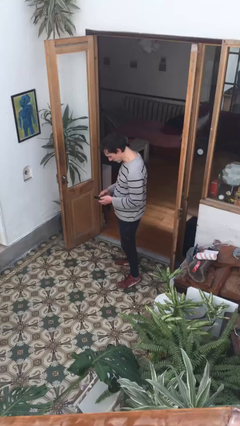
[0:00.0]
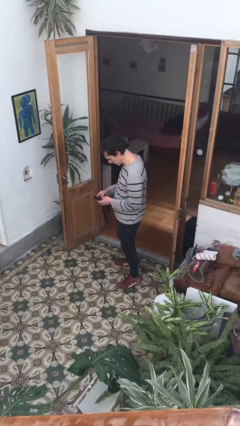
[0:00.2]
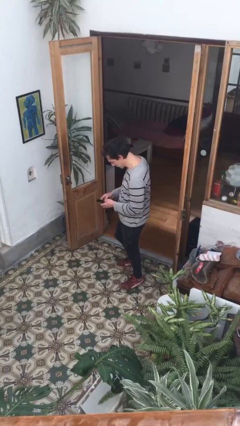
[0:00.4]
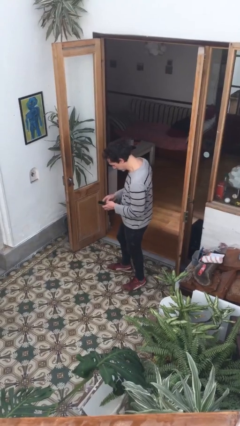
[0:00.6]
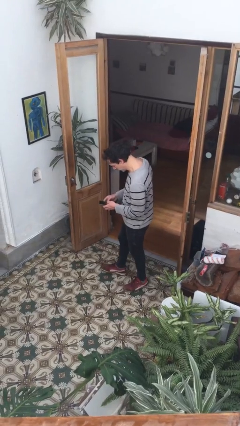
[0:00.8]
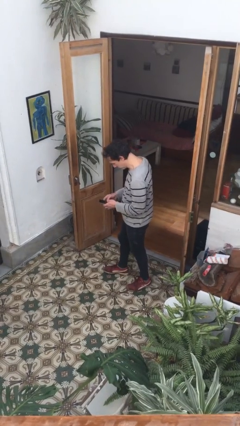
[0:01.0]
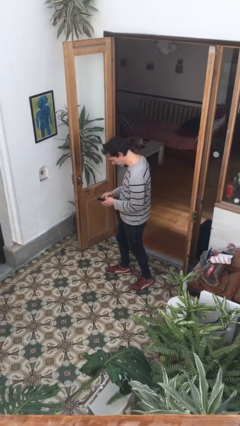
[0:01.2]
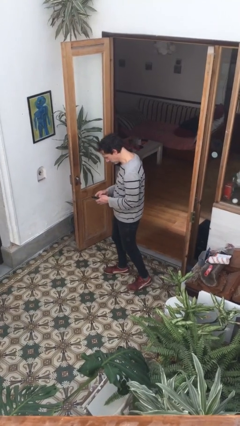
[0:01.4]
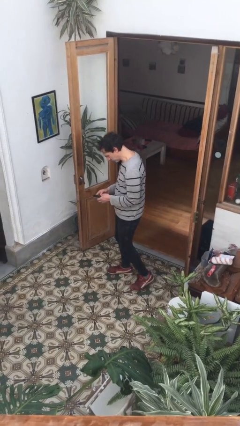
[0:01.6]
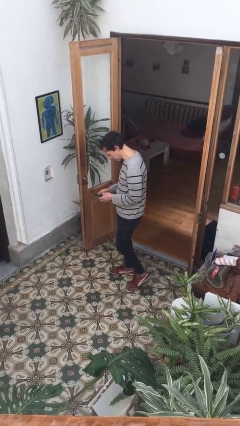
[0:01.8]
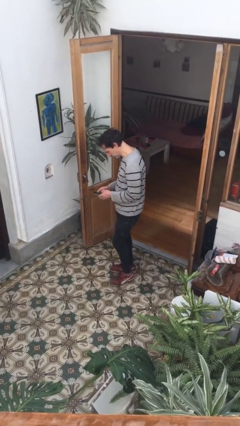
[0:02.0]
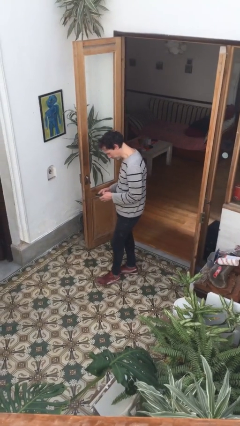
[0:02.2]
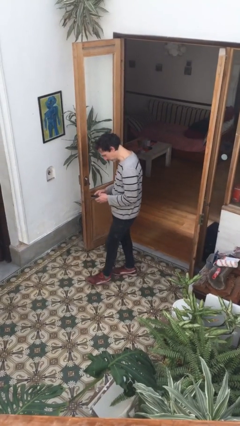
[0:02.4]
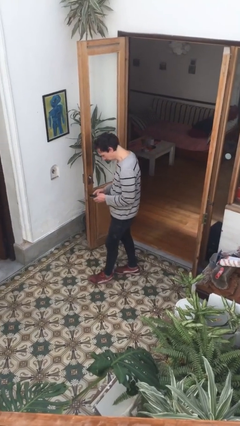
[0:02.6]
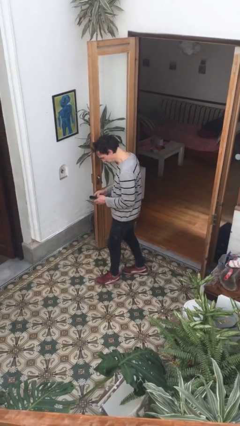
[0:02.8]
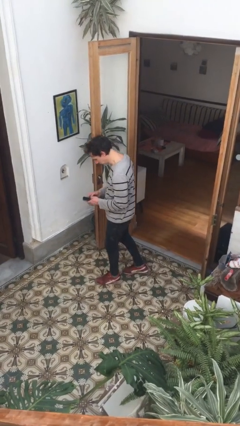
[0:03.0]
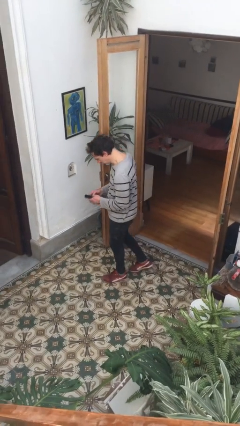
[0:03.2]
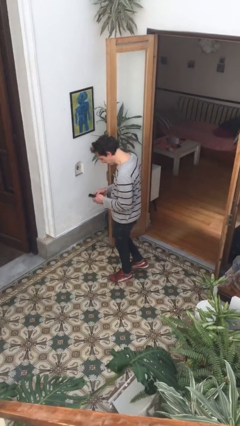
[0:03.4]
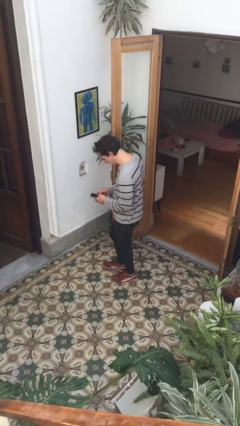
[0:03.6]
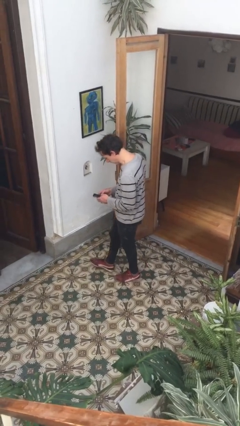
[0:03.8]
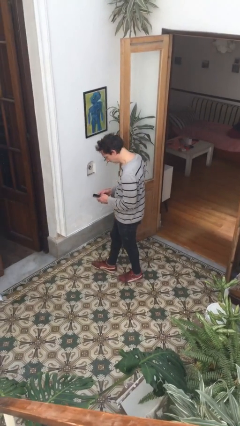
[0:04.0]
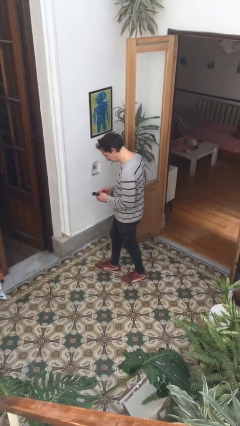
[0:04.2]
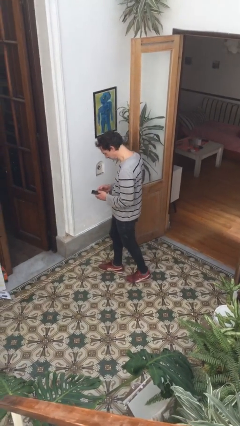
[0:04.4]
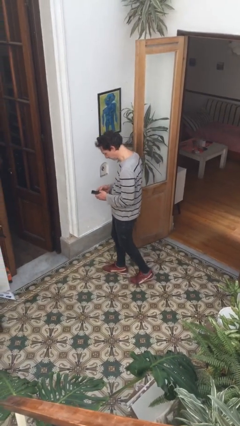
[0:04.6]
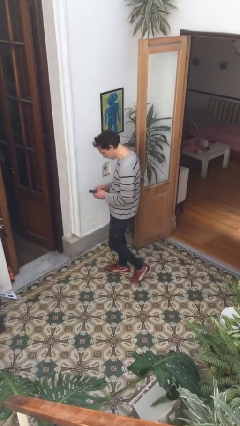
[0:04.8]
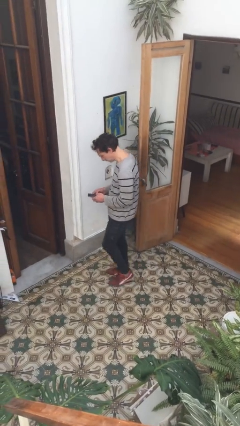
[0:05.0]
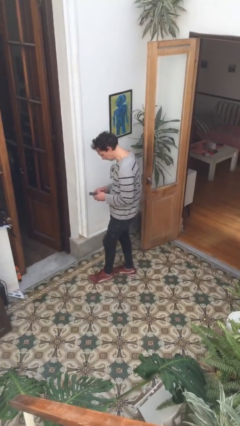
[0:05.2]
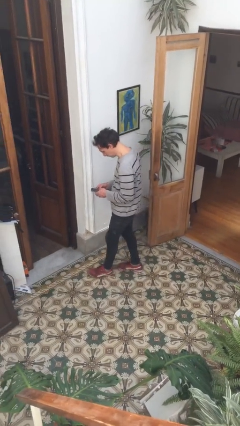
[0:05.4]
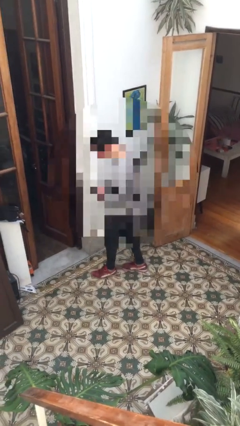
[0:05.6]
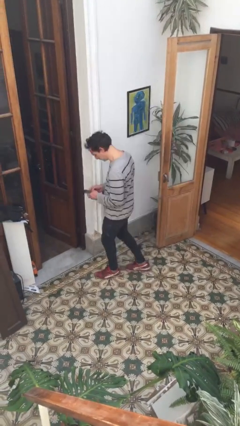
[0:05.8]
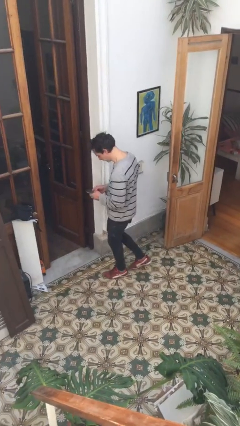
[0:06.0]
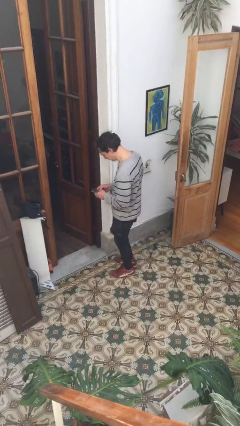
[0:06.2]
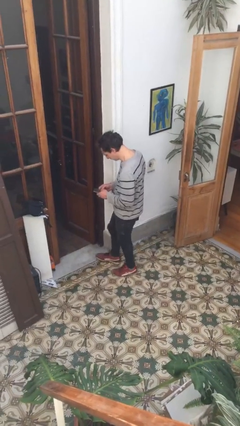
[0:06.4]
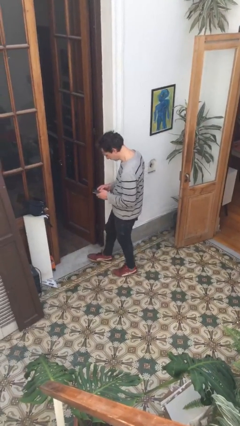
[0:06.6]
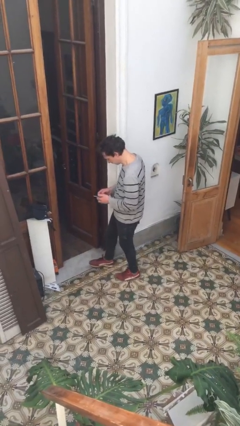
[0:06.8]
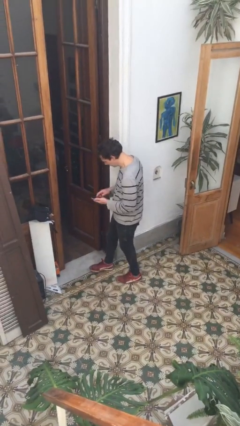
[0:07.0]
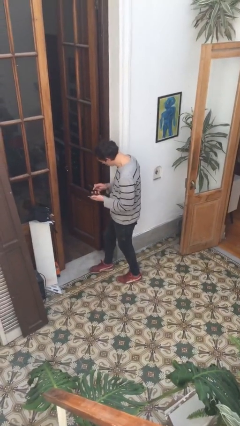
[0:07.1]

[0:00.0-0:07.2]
person texts on phone

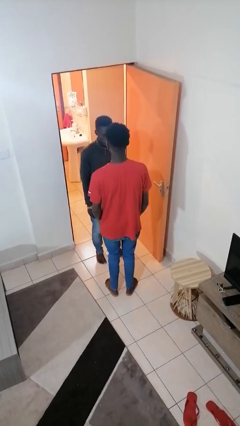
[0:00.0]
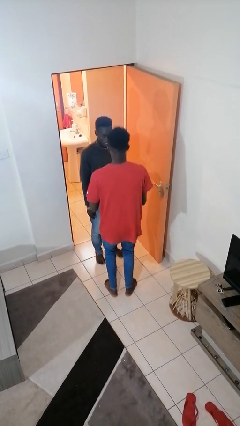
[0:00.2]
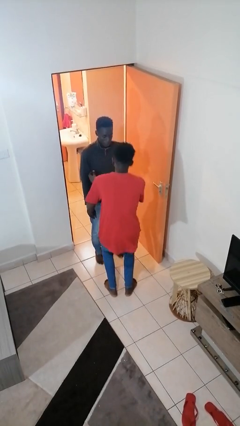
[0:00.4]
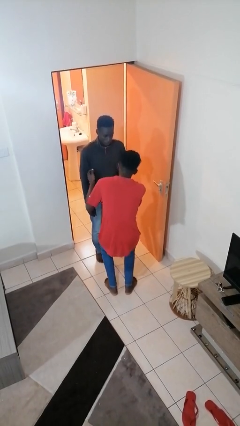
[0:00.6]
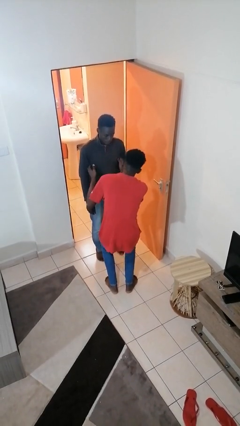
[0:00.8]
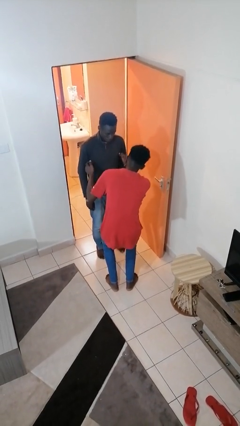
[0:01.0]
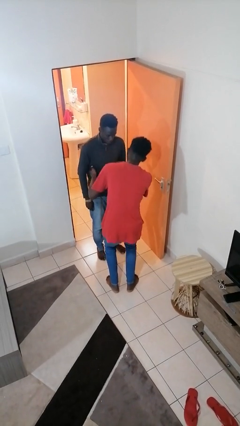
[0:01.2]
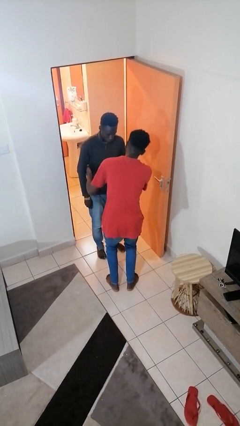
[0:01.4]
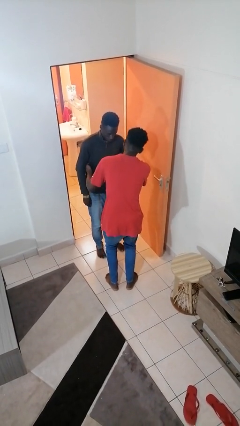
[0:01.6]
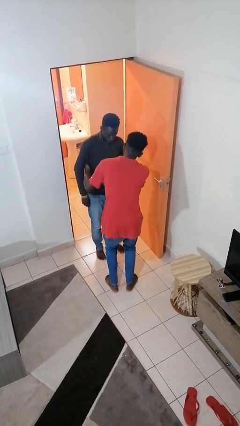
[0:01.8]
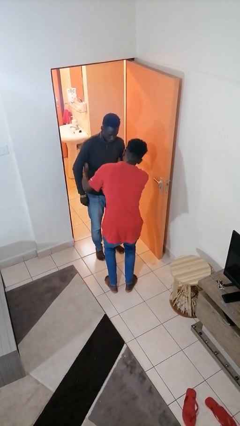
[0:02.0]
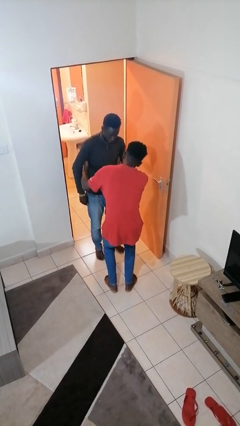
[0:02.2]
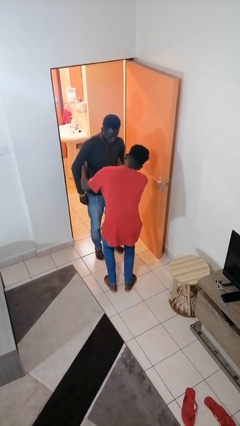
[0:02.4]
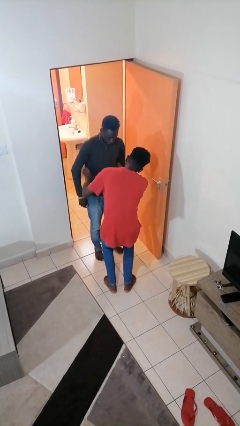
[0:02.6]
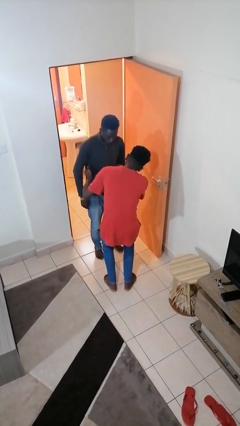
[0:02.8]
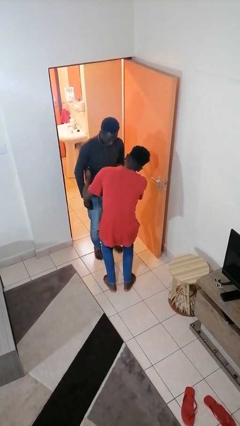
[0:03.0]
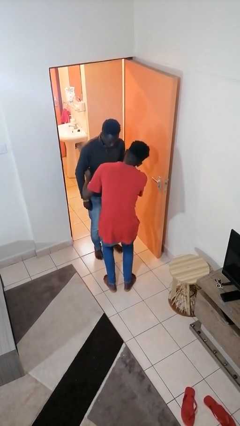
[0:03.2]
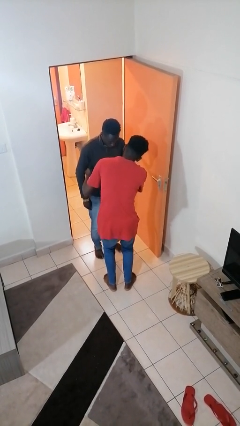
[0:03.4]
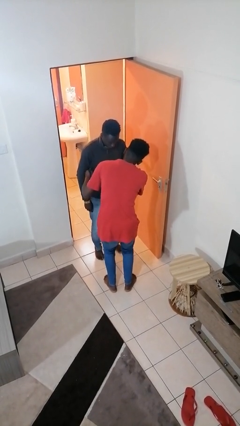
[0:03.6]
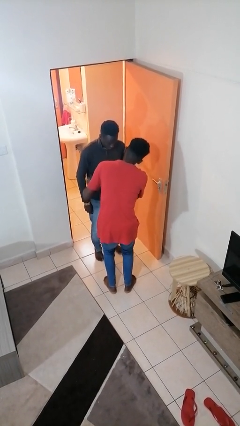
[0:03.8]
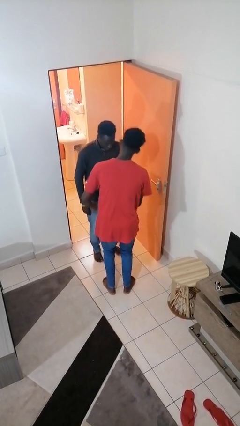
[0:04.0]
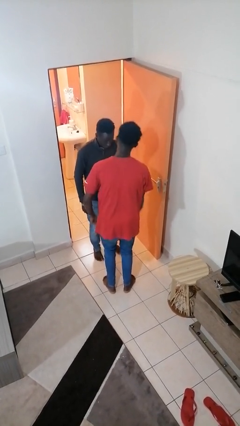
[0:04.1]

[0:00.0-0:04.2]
person tickles person

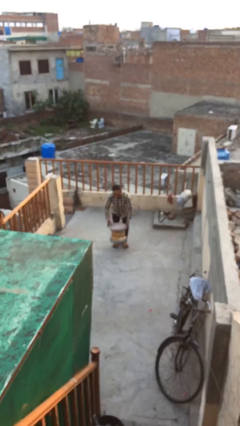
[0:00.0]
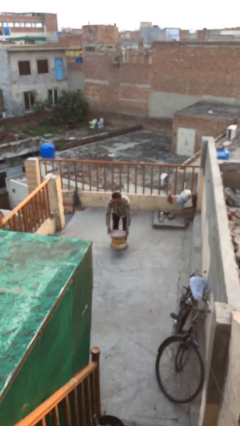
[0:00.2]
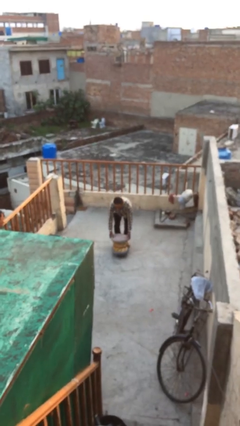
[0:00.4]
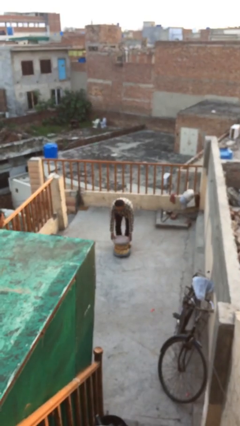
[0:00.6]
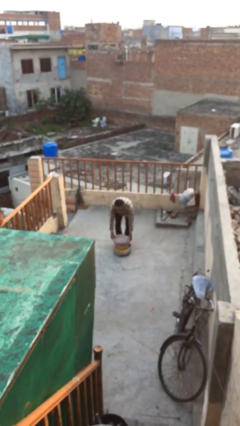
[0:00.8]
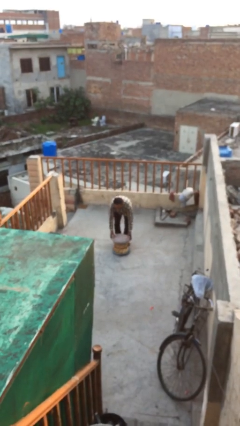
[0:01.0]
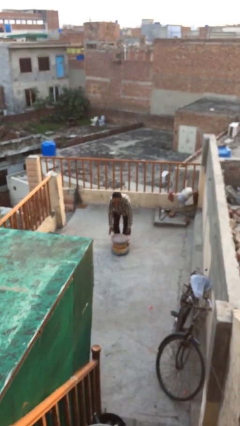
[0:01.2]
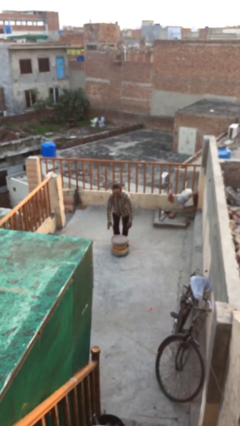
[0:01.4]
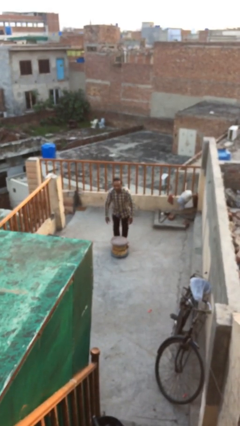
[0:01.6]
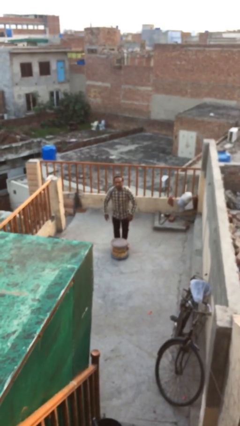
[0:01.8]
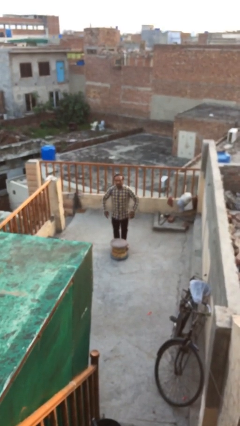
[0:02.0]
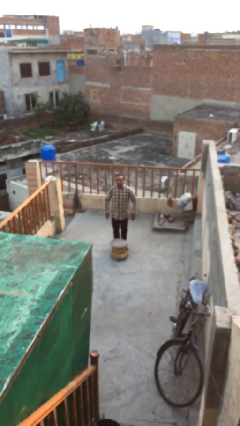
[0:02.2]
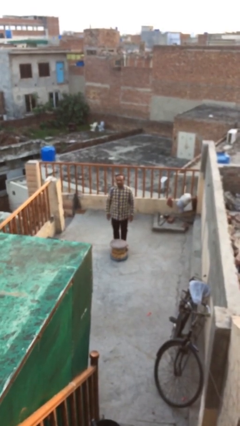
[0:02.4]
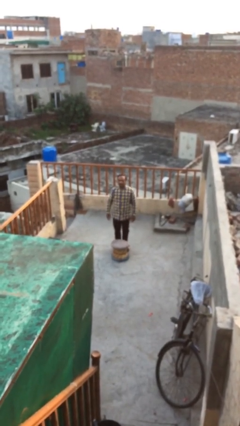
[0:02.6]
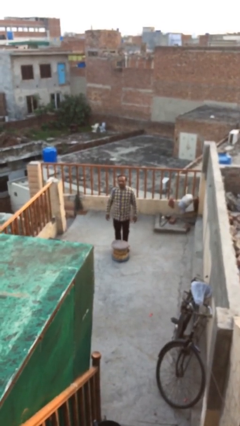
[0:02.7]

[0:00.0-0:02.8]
person puts down object on floor

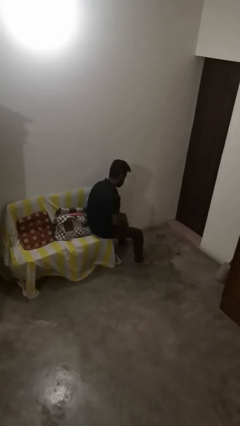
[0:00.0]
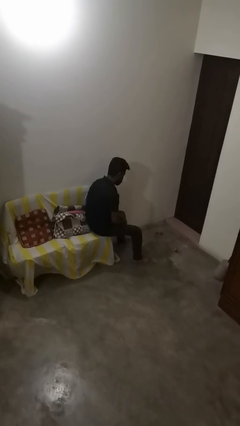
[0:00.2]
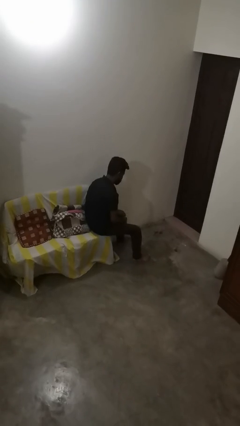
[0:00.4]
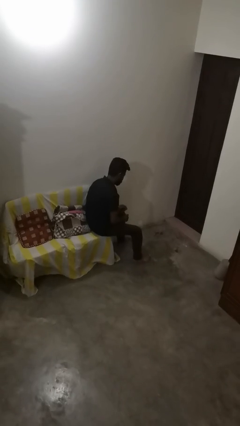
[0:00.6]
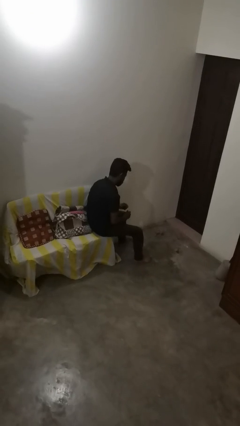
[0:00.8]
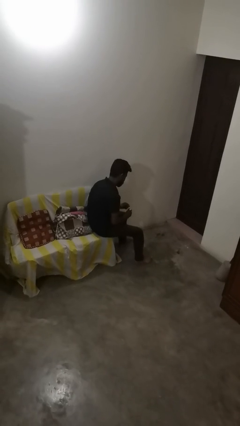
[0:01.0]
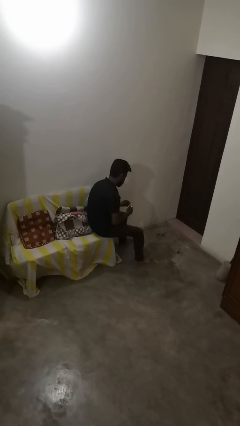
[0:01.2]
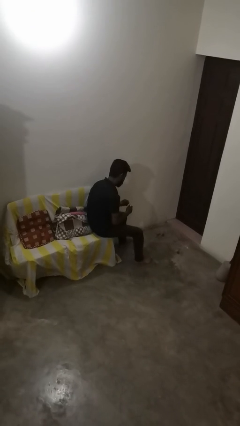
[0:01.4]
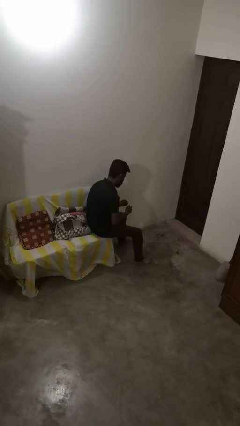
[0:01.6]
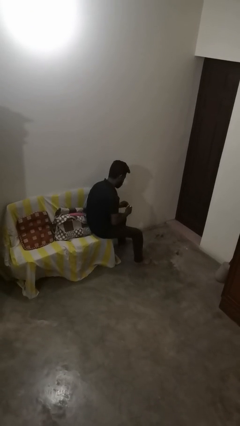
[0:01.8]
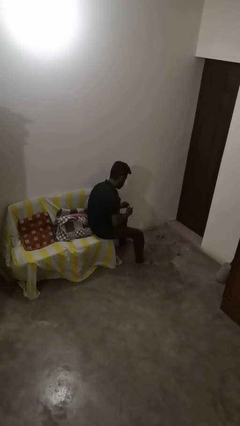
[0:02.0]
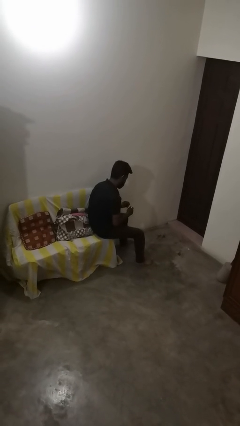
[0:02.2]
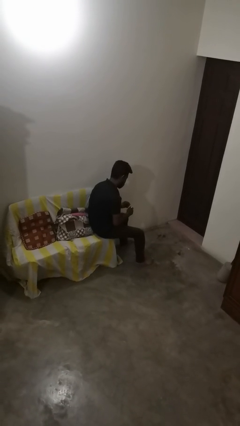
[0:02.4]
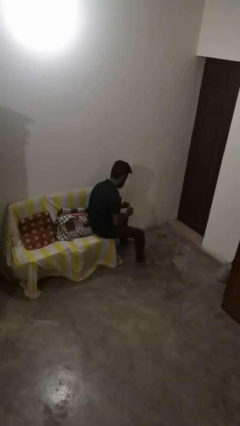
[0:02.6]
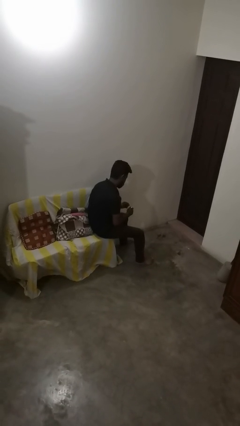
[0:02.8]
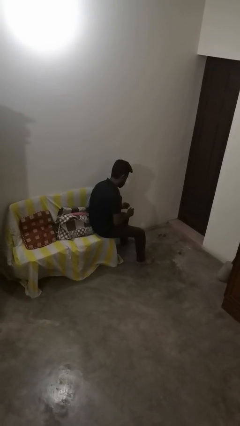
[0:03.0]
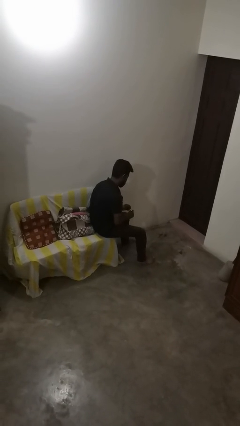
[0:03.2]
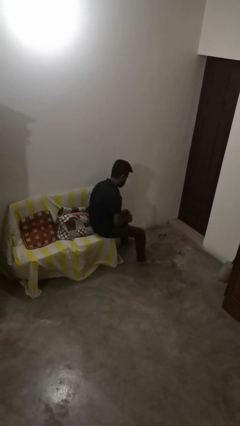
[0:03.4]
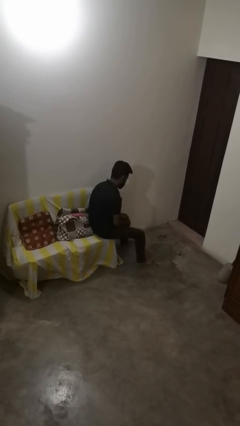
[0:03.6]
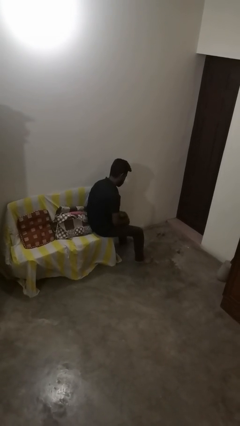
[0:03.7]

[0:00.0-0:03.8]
person paints fingernails
